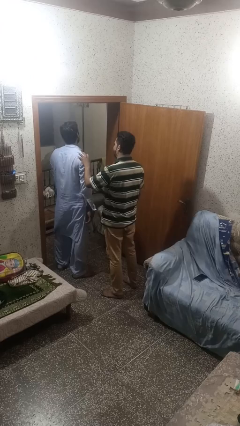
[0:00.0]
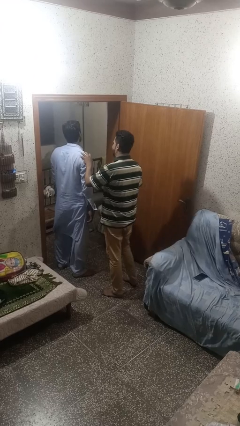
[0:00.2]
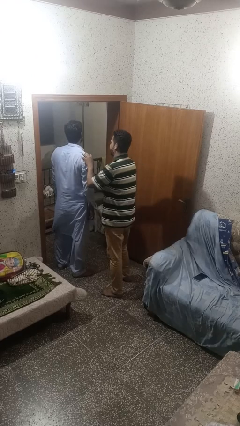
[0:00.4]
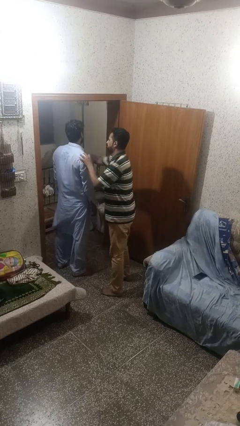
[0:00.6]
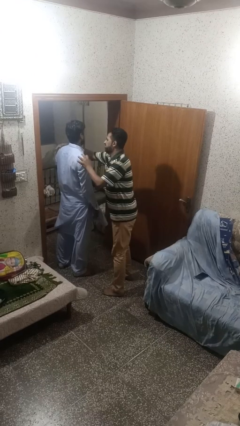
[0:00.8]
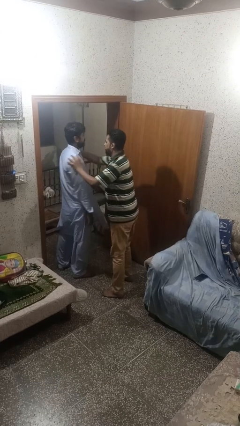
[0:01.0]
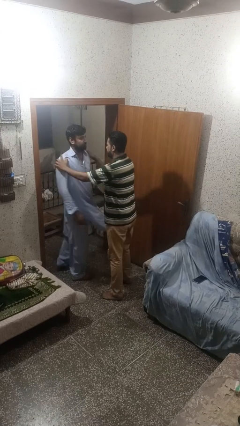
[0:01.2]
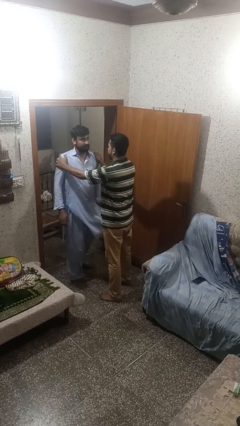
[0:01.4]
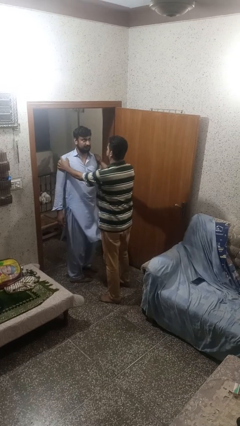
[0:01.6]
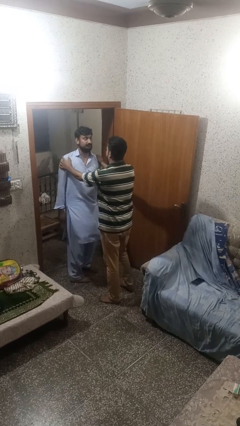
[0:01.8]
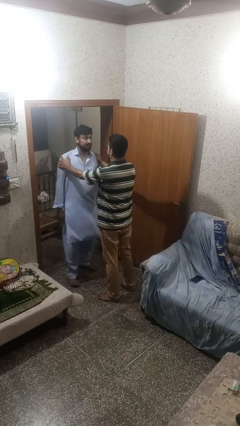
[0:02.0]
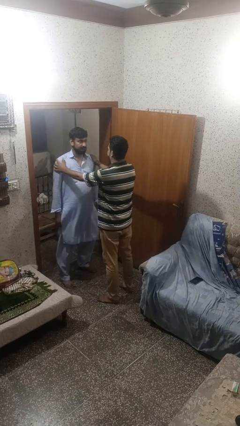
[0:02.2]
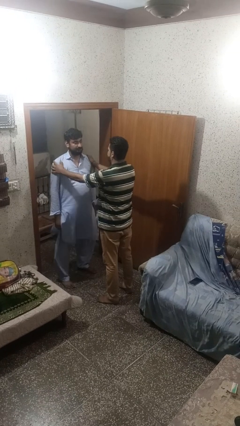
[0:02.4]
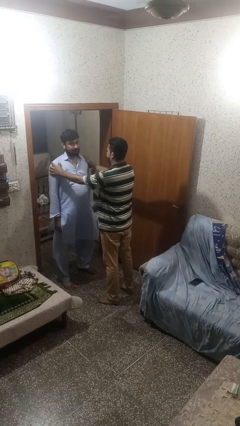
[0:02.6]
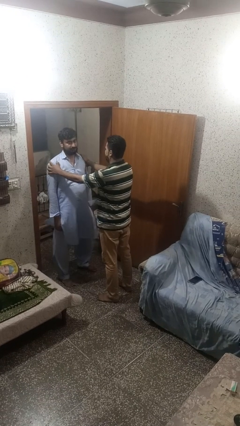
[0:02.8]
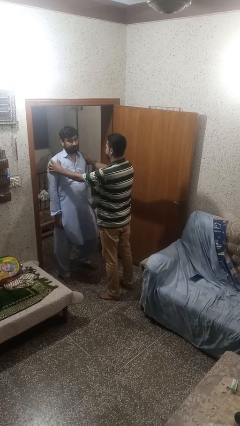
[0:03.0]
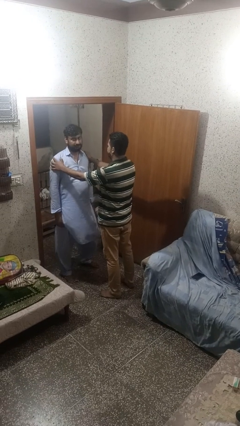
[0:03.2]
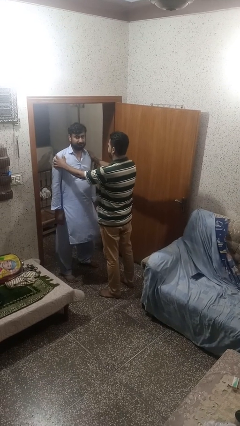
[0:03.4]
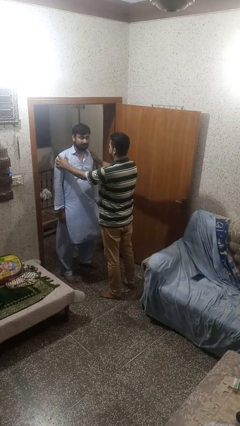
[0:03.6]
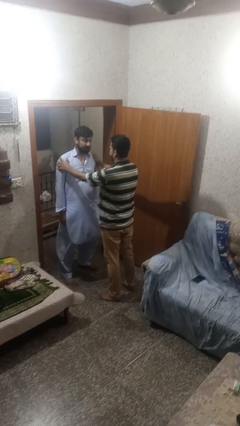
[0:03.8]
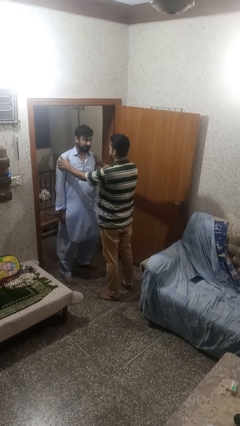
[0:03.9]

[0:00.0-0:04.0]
person spins person around

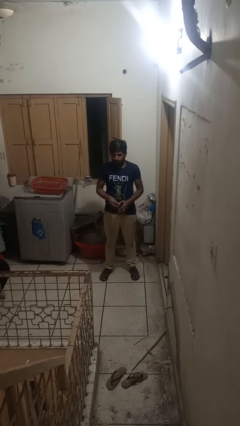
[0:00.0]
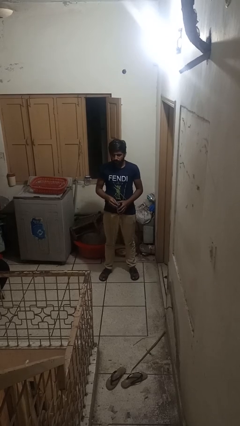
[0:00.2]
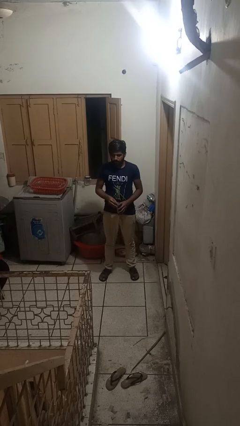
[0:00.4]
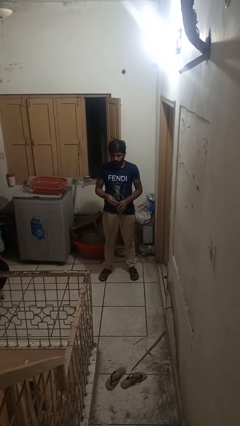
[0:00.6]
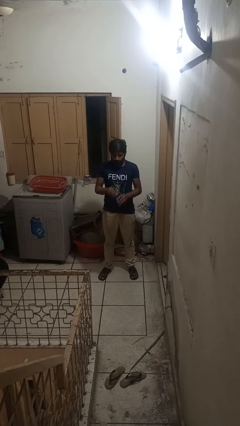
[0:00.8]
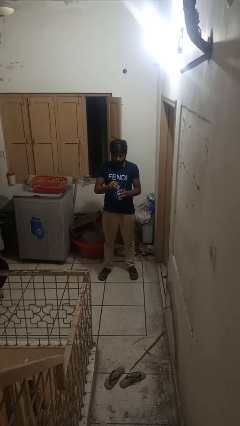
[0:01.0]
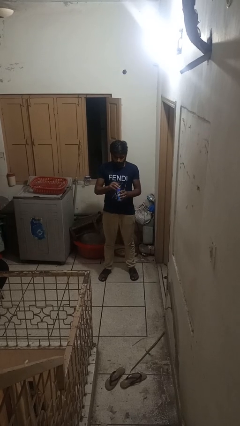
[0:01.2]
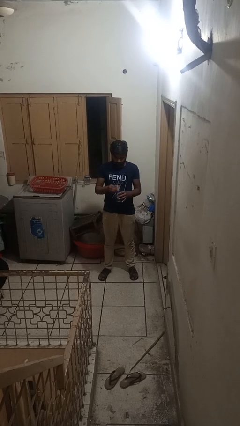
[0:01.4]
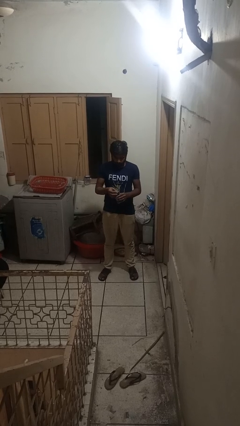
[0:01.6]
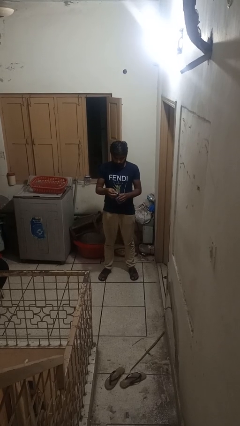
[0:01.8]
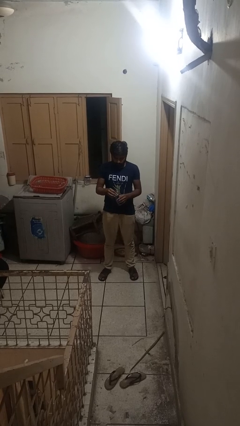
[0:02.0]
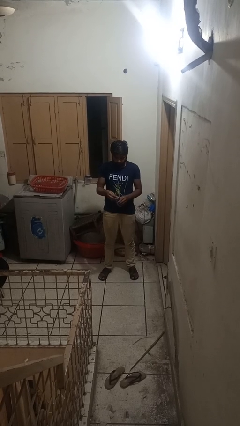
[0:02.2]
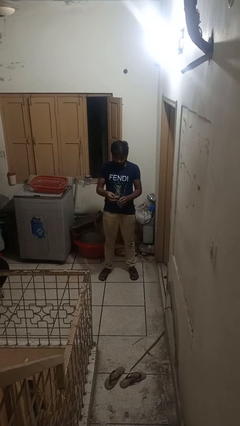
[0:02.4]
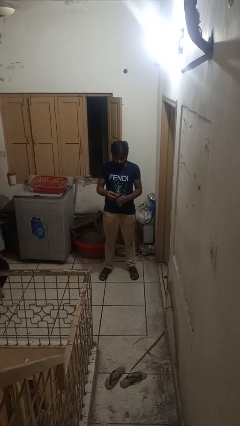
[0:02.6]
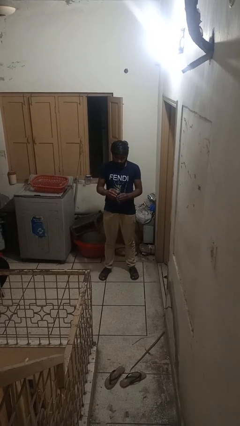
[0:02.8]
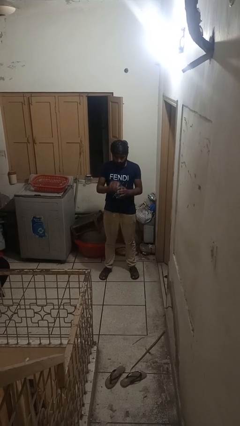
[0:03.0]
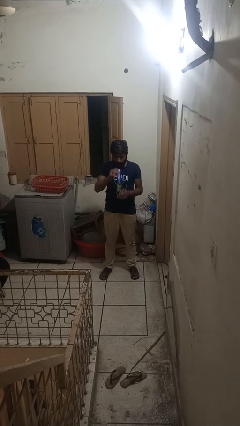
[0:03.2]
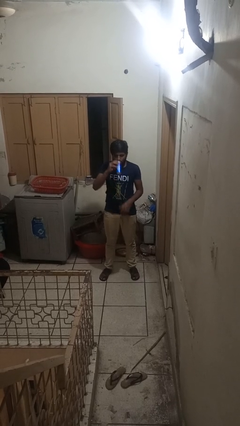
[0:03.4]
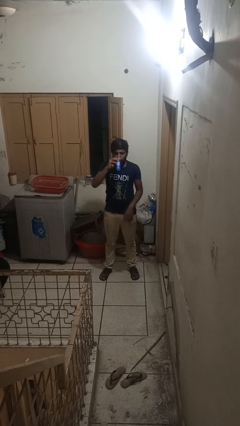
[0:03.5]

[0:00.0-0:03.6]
person opens beverage can

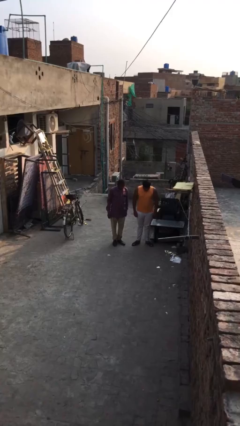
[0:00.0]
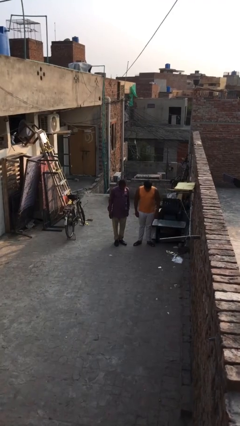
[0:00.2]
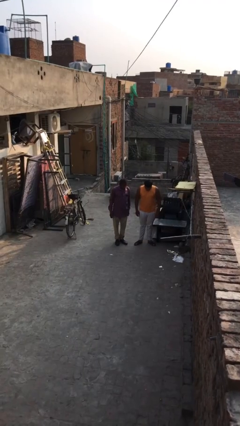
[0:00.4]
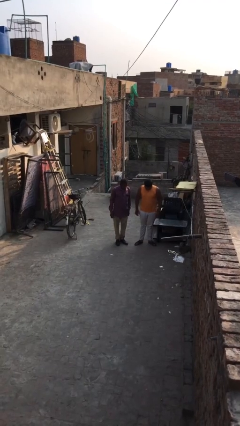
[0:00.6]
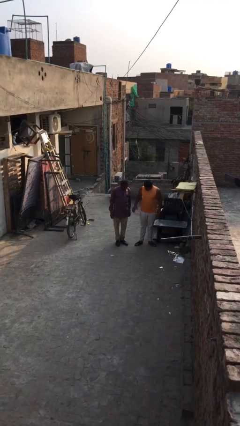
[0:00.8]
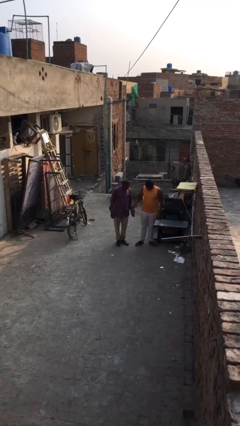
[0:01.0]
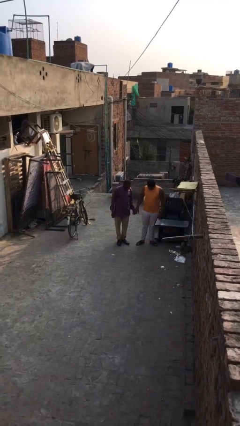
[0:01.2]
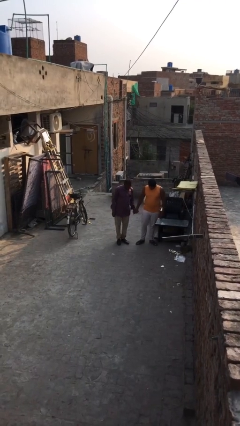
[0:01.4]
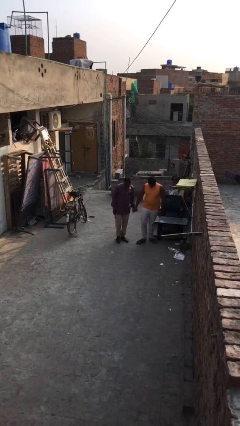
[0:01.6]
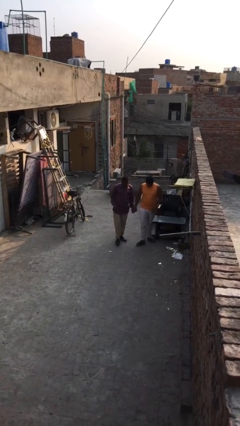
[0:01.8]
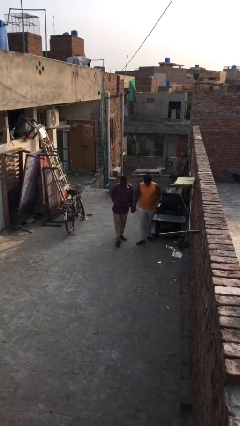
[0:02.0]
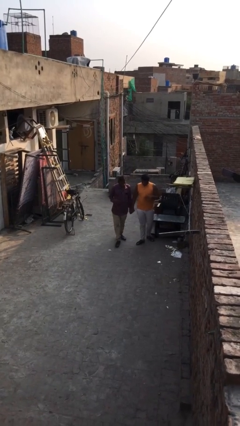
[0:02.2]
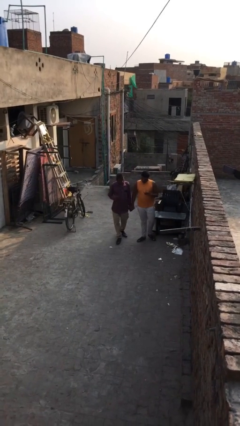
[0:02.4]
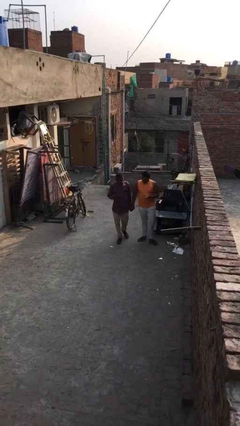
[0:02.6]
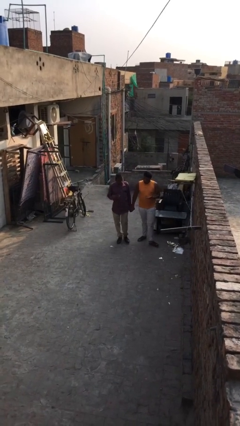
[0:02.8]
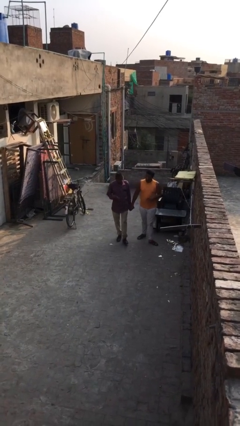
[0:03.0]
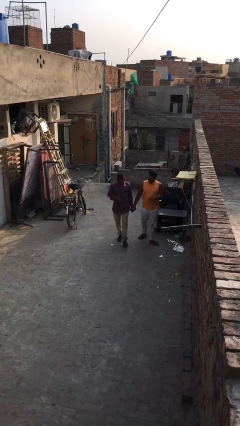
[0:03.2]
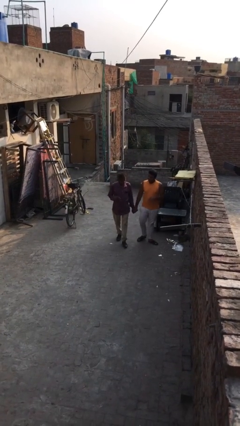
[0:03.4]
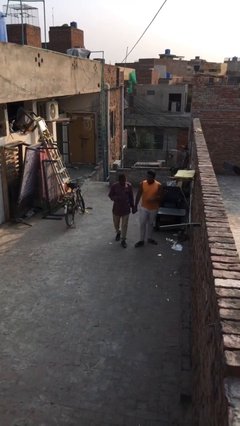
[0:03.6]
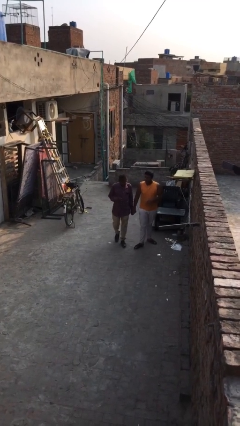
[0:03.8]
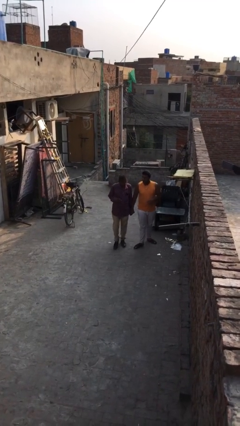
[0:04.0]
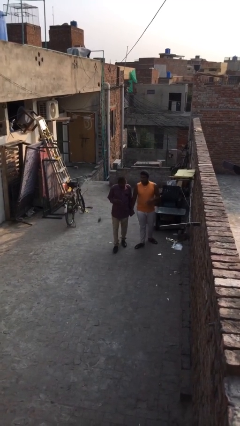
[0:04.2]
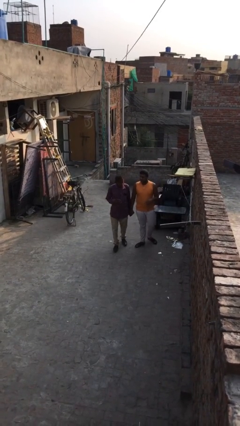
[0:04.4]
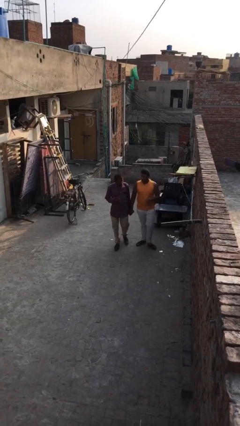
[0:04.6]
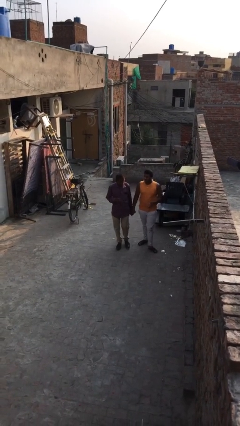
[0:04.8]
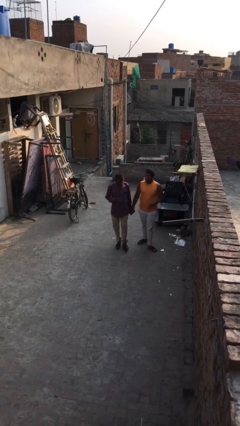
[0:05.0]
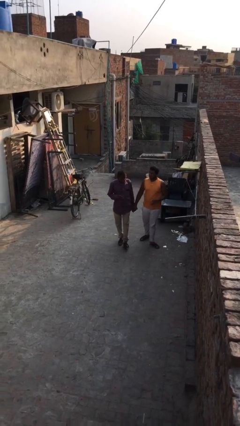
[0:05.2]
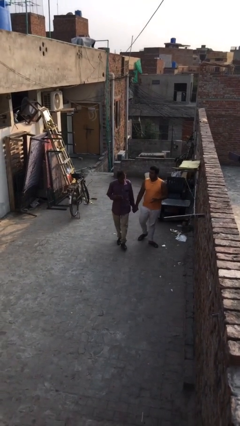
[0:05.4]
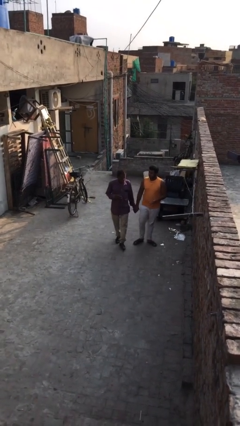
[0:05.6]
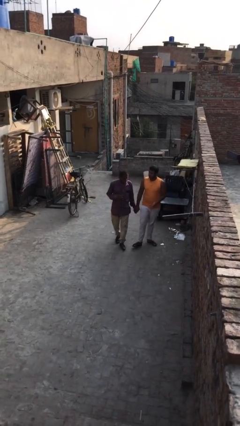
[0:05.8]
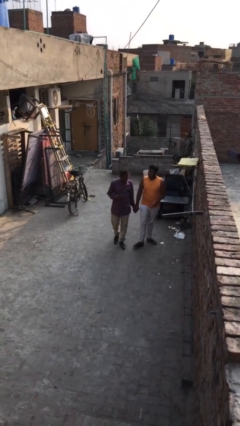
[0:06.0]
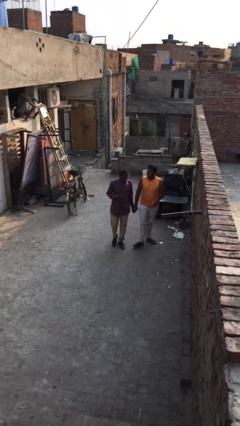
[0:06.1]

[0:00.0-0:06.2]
person holds hand

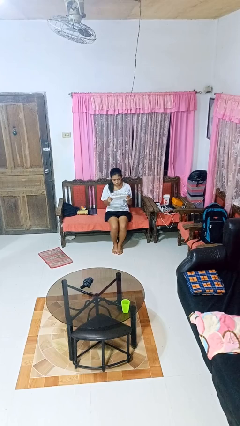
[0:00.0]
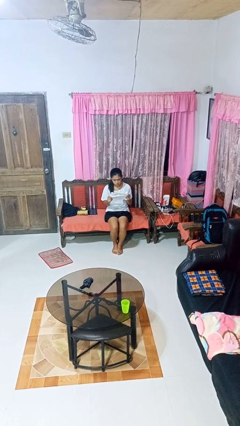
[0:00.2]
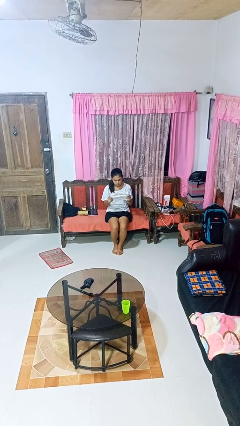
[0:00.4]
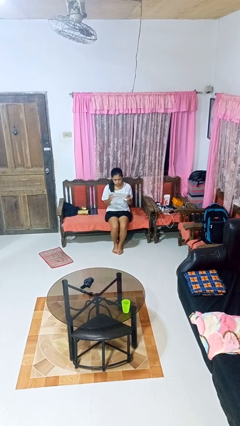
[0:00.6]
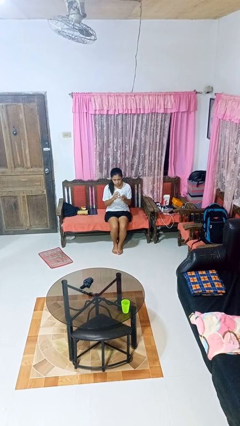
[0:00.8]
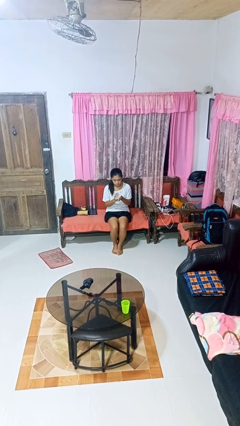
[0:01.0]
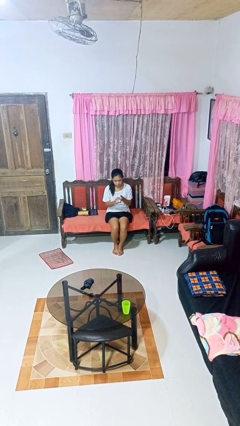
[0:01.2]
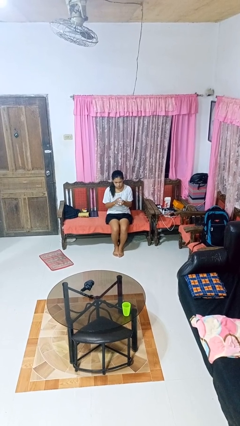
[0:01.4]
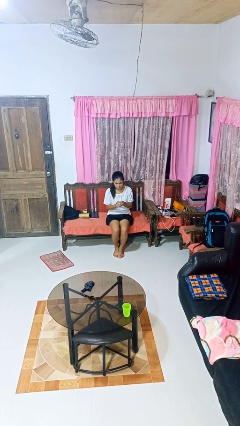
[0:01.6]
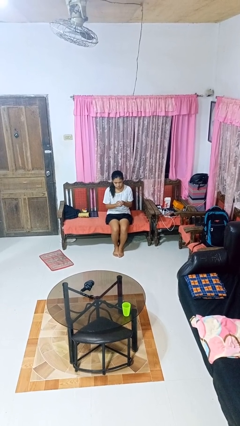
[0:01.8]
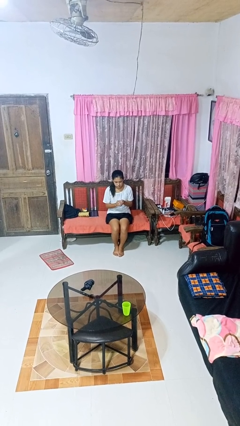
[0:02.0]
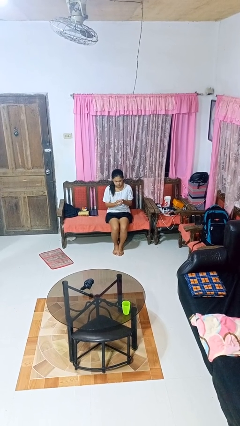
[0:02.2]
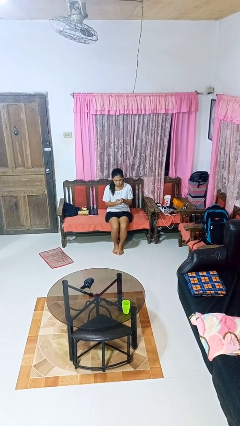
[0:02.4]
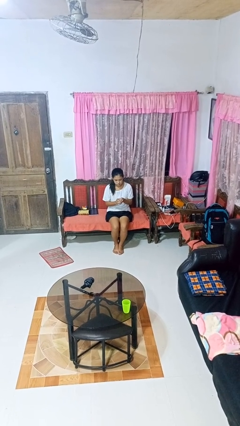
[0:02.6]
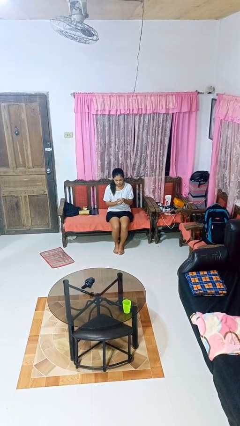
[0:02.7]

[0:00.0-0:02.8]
person crumples paper

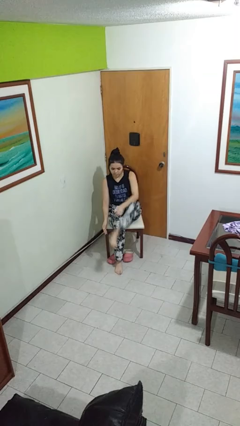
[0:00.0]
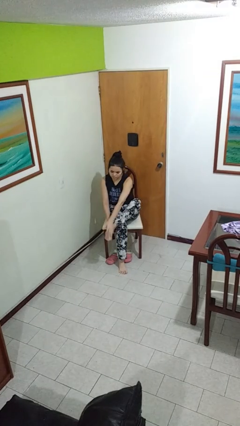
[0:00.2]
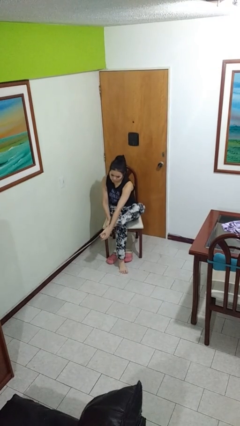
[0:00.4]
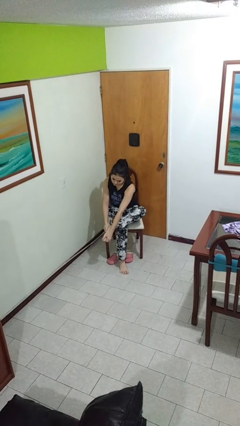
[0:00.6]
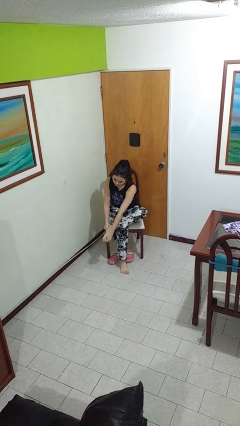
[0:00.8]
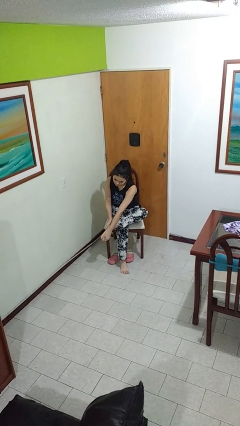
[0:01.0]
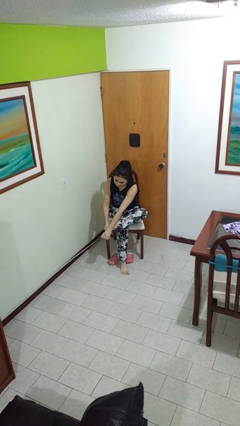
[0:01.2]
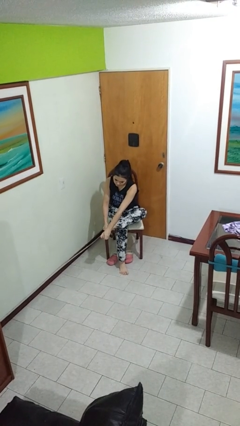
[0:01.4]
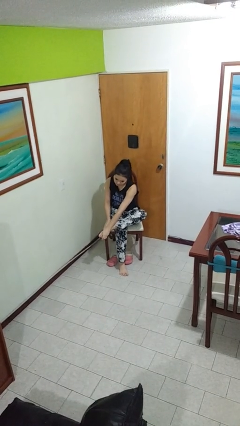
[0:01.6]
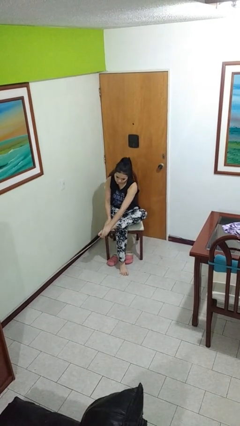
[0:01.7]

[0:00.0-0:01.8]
person rubs foot
